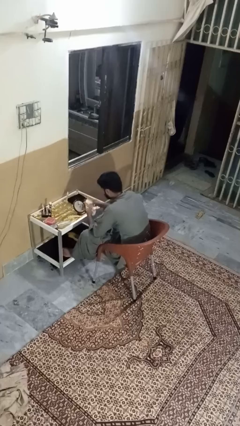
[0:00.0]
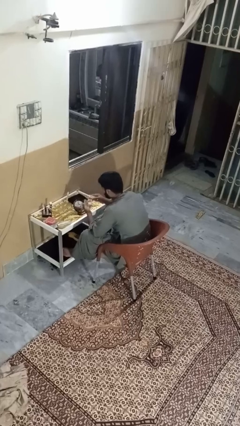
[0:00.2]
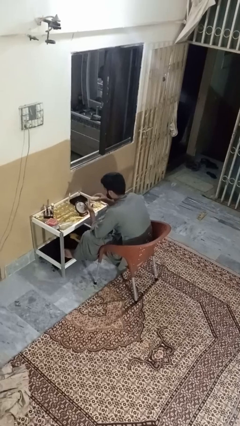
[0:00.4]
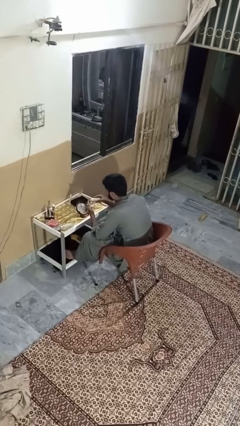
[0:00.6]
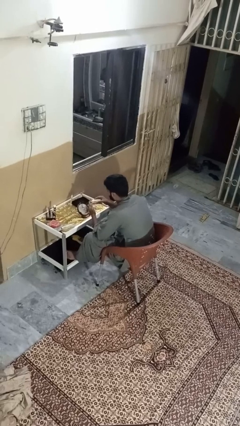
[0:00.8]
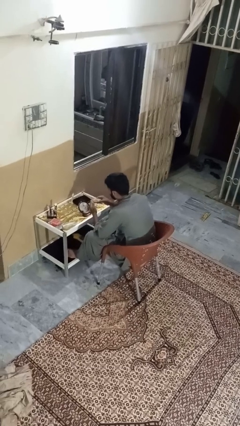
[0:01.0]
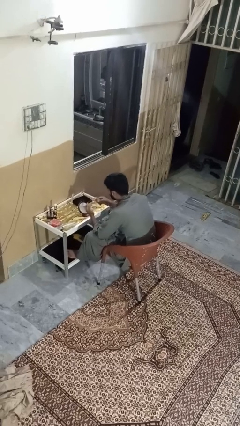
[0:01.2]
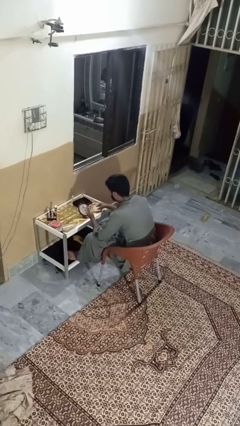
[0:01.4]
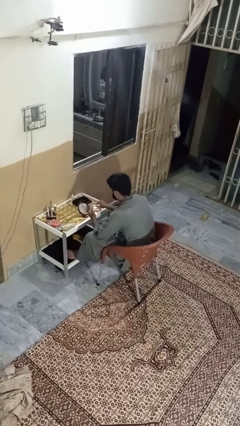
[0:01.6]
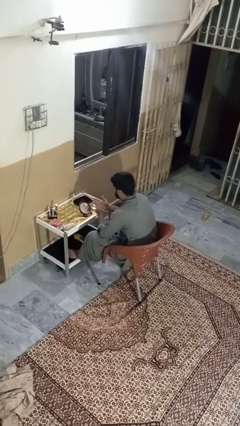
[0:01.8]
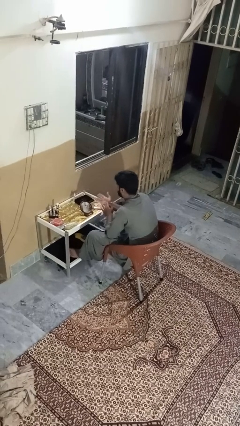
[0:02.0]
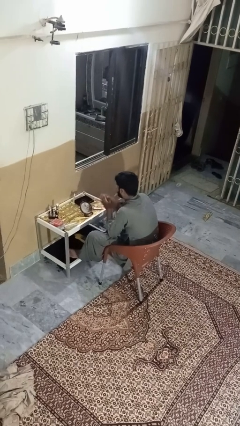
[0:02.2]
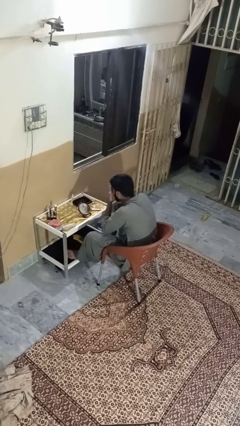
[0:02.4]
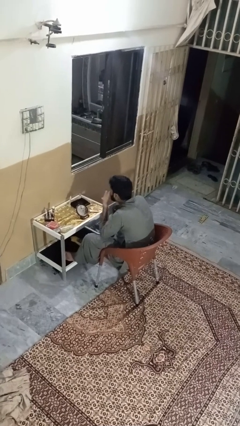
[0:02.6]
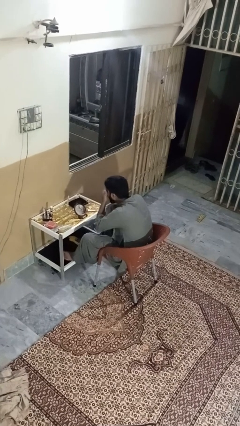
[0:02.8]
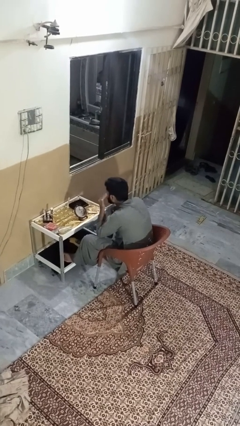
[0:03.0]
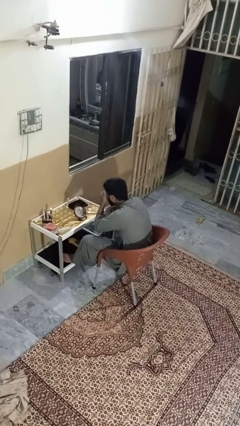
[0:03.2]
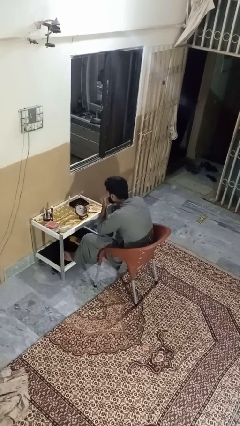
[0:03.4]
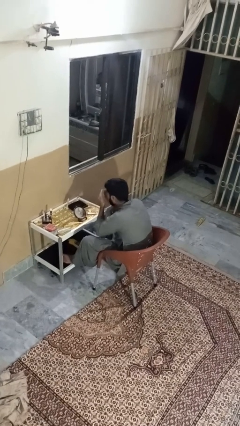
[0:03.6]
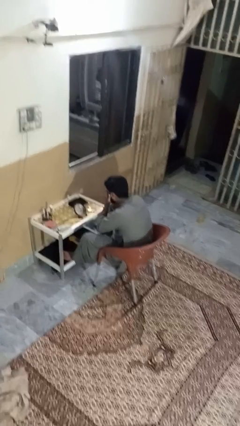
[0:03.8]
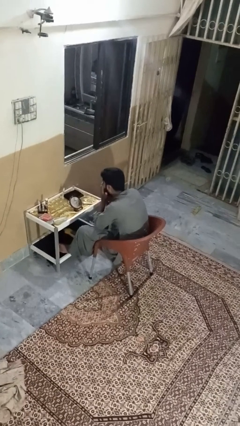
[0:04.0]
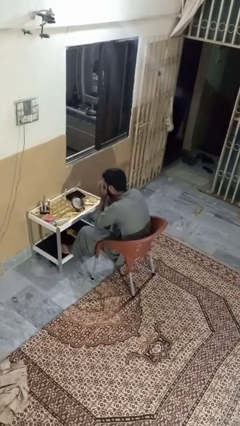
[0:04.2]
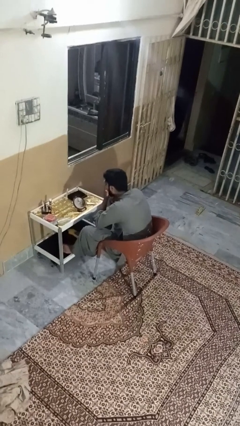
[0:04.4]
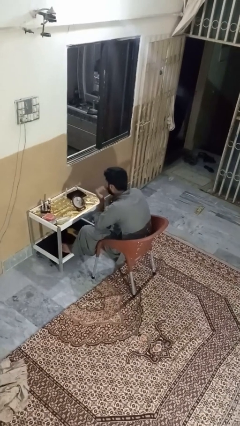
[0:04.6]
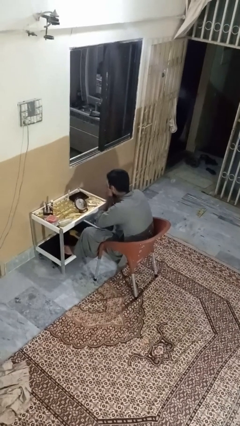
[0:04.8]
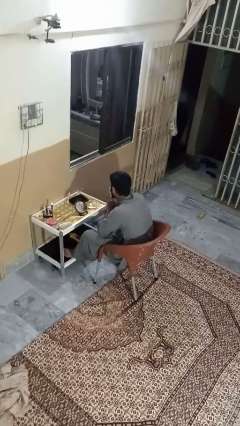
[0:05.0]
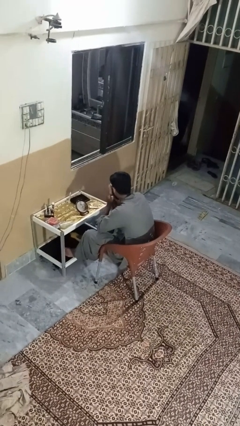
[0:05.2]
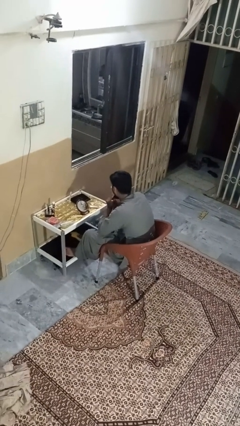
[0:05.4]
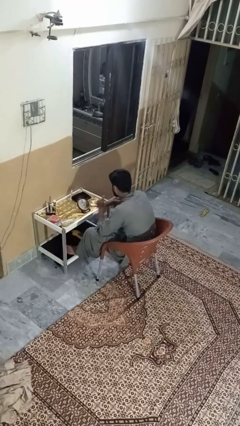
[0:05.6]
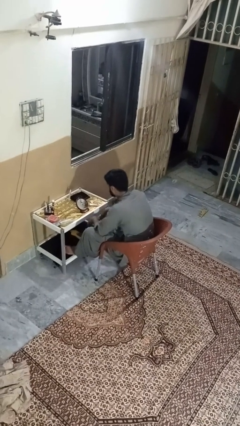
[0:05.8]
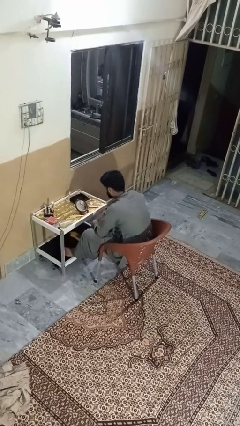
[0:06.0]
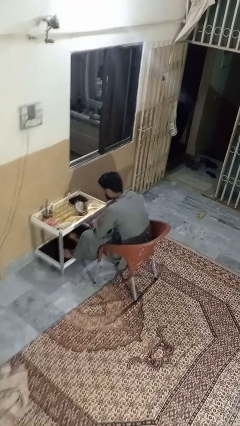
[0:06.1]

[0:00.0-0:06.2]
person applies foundation makeup

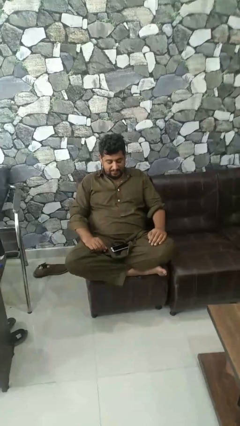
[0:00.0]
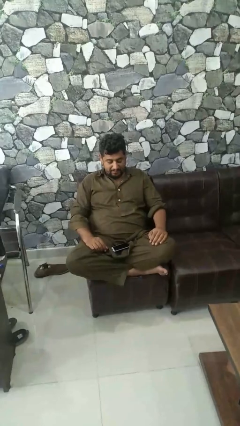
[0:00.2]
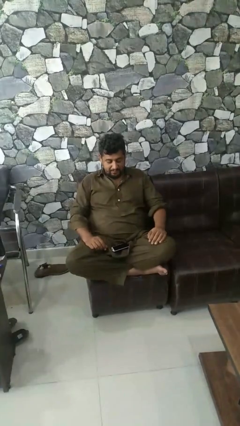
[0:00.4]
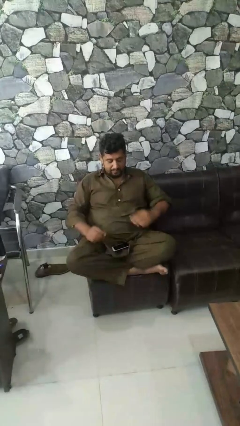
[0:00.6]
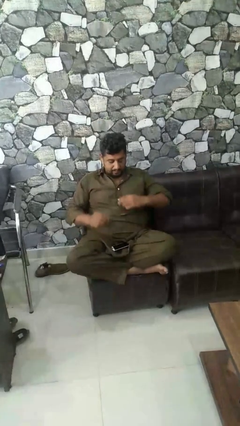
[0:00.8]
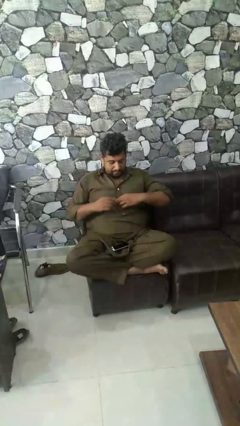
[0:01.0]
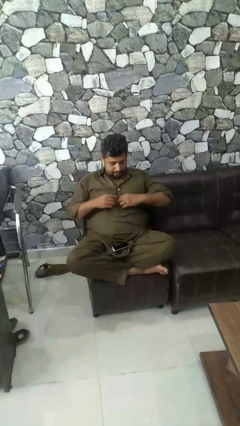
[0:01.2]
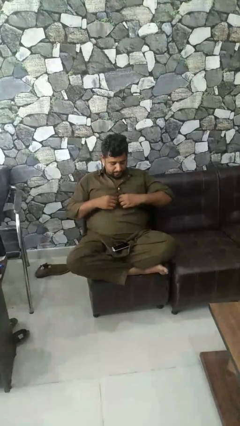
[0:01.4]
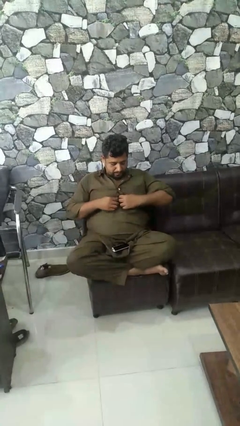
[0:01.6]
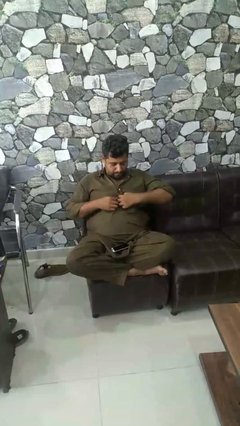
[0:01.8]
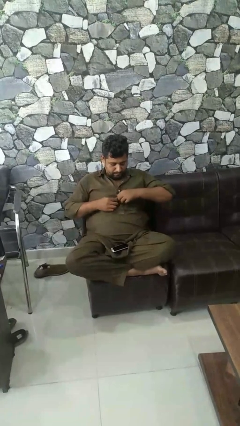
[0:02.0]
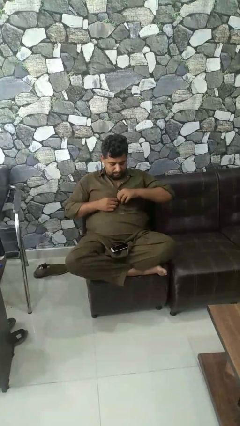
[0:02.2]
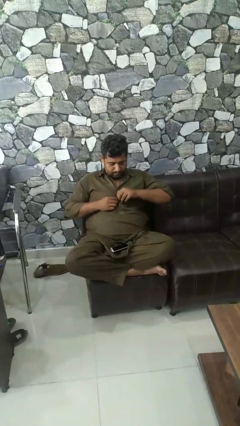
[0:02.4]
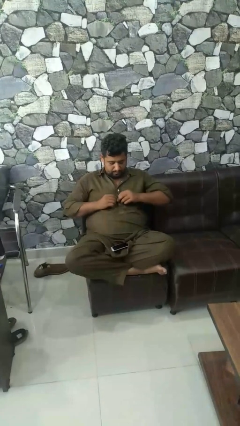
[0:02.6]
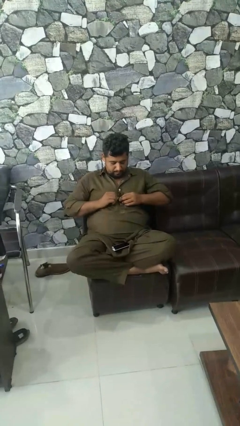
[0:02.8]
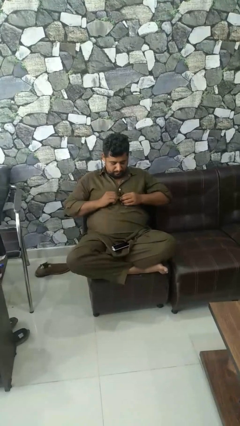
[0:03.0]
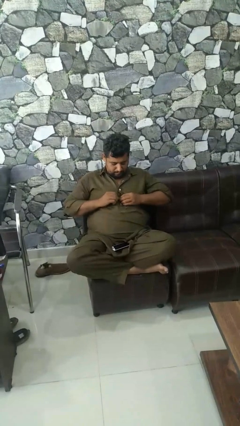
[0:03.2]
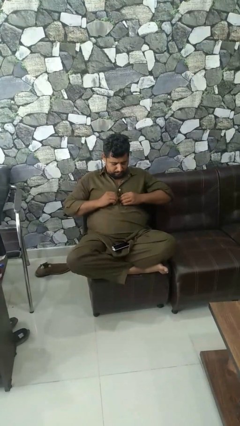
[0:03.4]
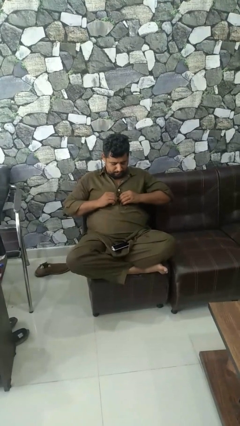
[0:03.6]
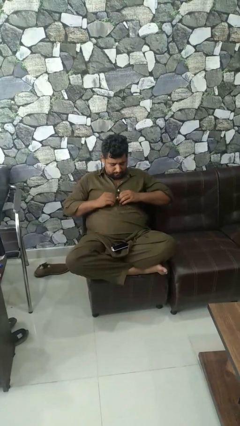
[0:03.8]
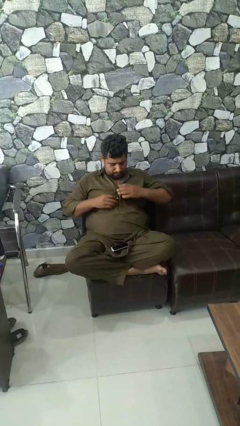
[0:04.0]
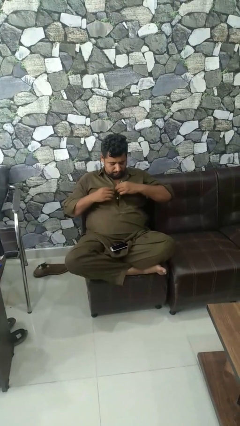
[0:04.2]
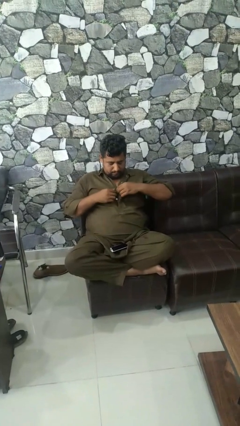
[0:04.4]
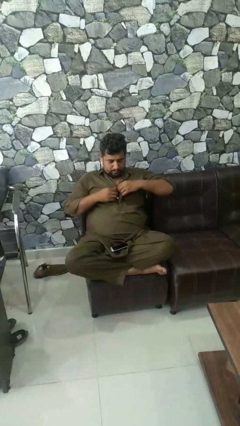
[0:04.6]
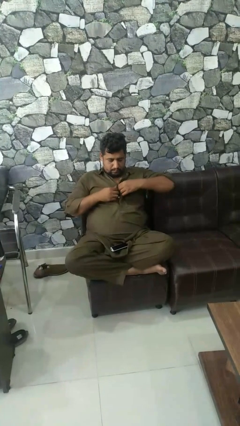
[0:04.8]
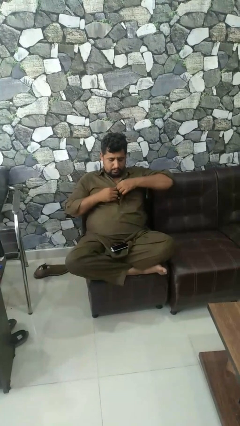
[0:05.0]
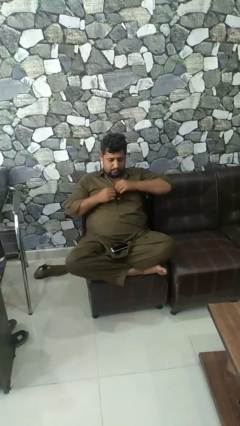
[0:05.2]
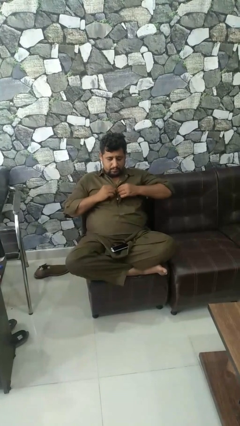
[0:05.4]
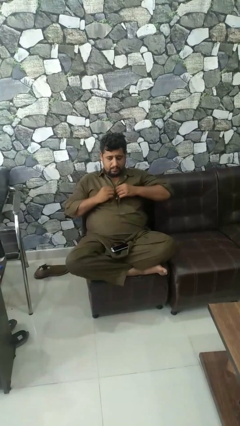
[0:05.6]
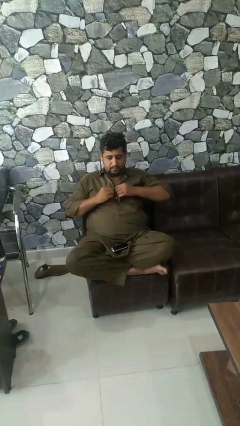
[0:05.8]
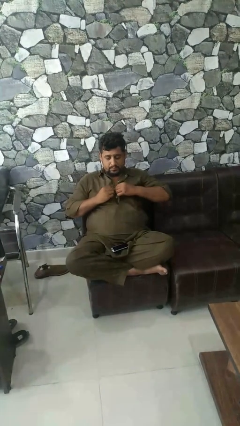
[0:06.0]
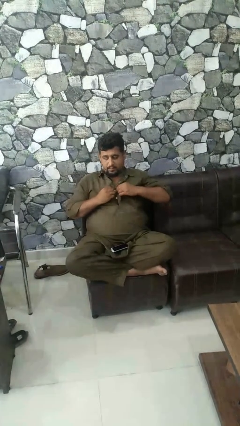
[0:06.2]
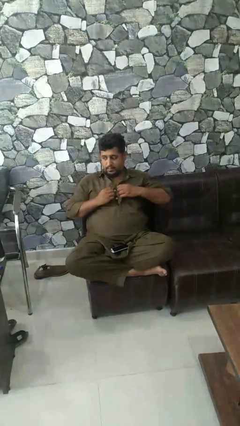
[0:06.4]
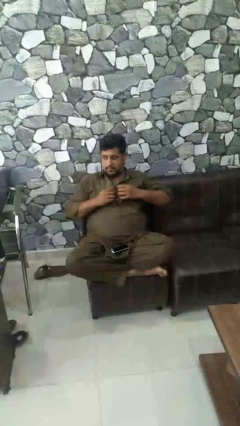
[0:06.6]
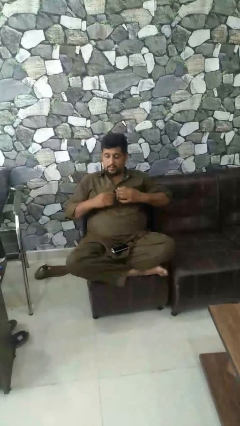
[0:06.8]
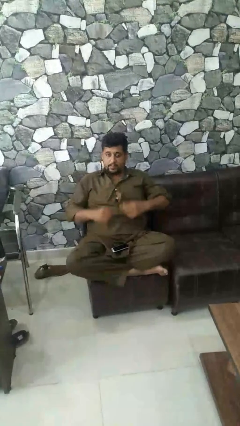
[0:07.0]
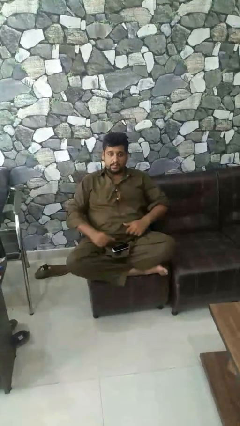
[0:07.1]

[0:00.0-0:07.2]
person unbuttons shirt

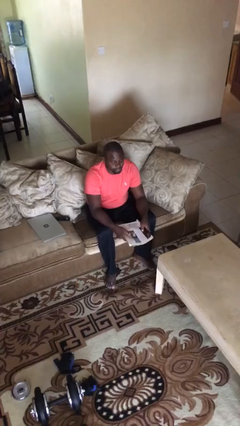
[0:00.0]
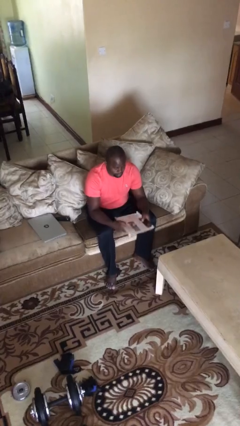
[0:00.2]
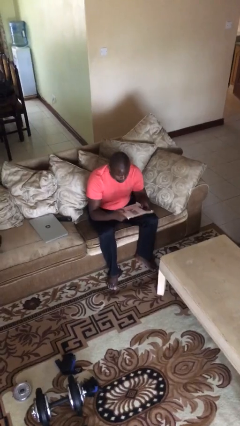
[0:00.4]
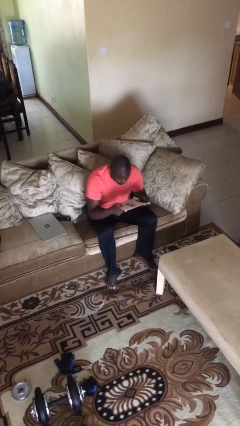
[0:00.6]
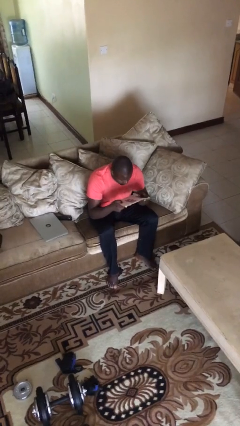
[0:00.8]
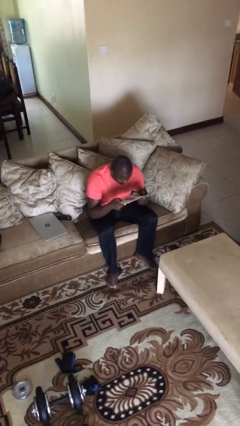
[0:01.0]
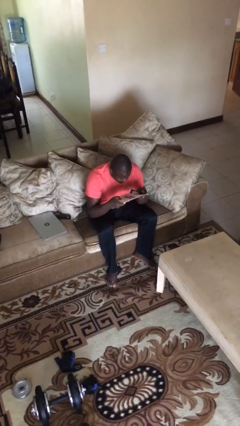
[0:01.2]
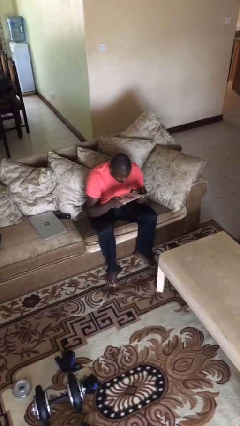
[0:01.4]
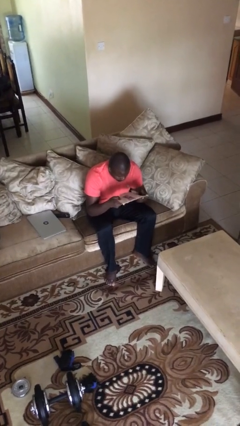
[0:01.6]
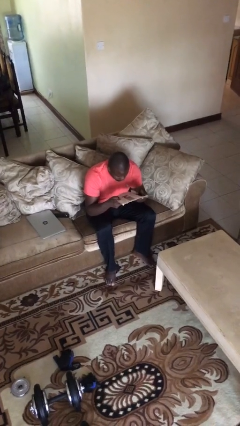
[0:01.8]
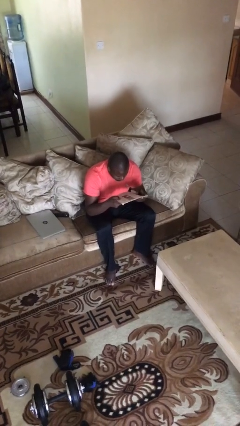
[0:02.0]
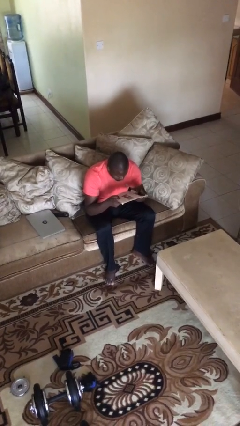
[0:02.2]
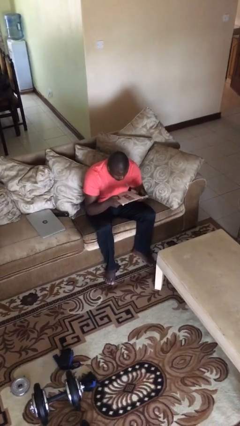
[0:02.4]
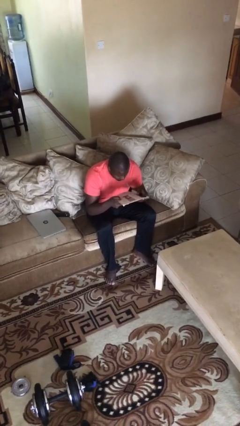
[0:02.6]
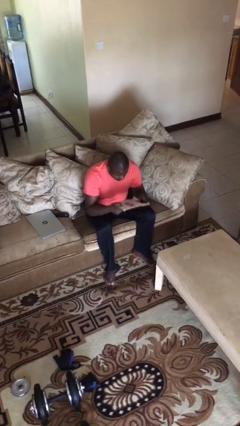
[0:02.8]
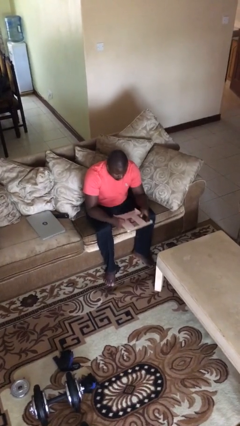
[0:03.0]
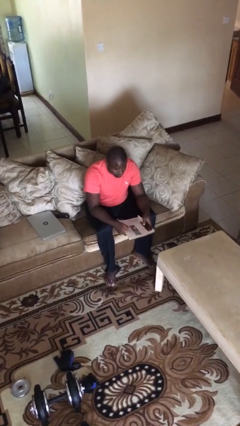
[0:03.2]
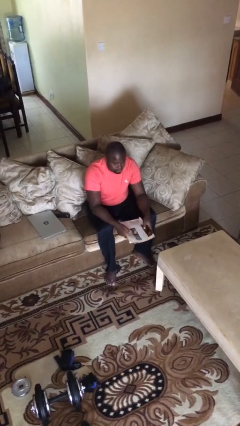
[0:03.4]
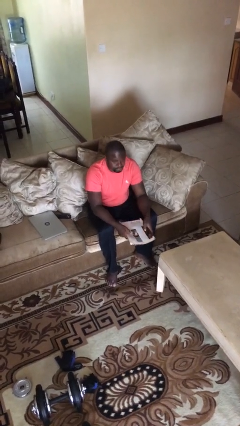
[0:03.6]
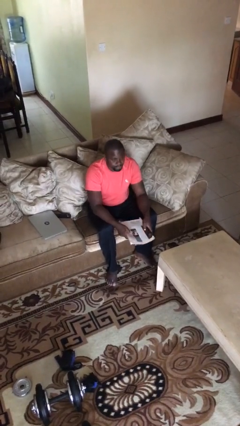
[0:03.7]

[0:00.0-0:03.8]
person reads document

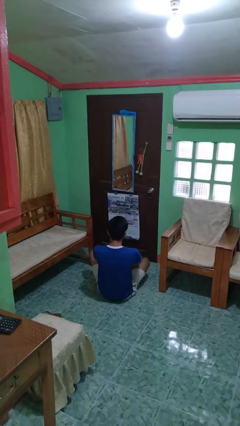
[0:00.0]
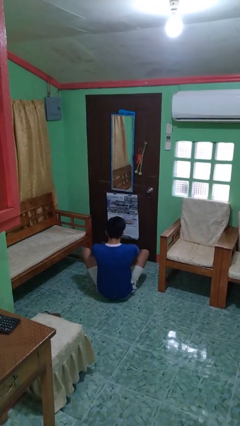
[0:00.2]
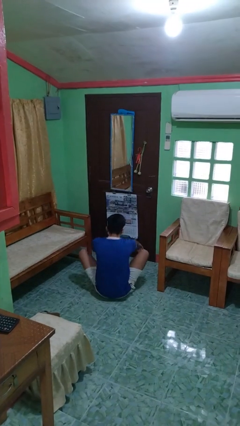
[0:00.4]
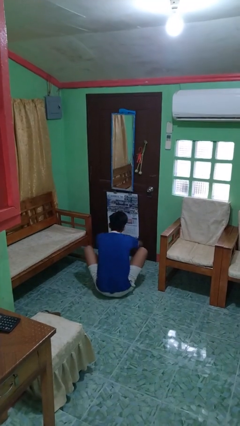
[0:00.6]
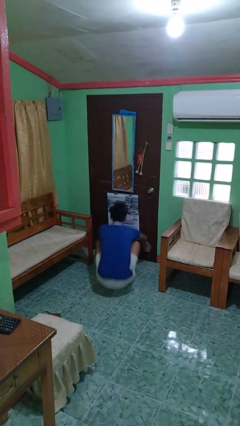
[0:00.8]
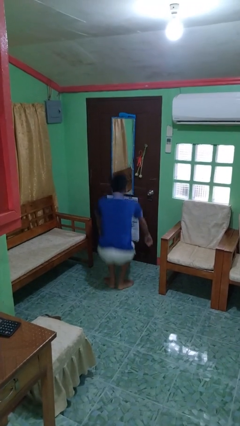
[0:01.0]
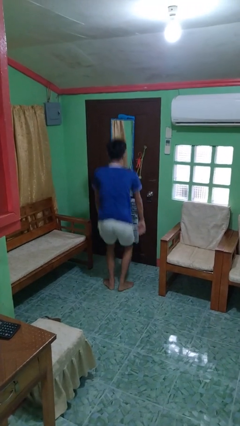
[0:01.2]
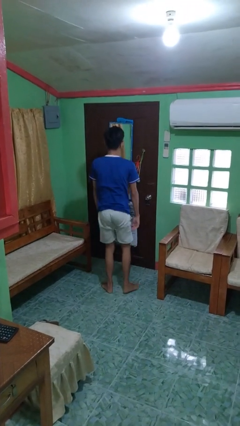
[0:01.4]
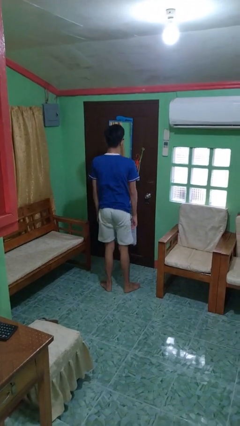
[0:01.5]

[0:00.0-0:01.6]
person stands up from floor
